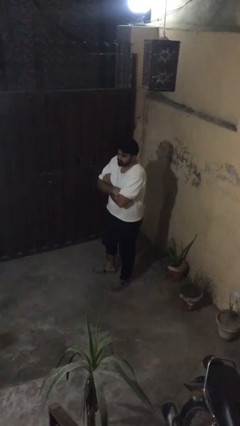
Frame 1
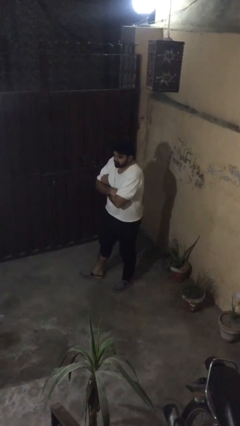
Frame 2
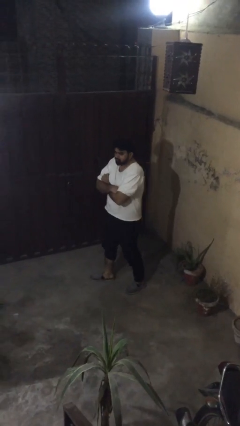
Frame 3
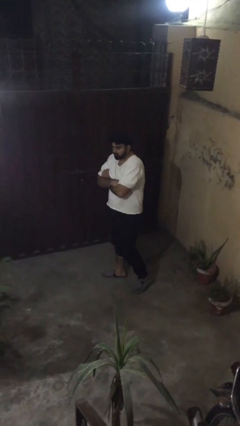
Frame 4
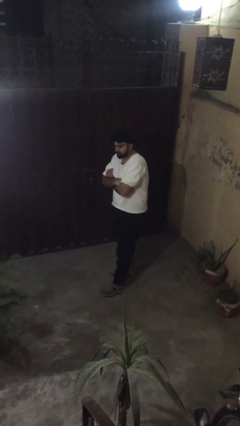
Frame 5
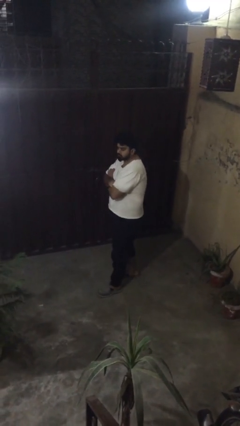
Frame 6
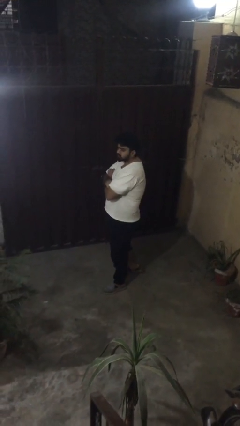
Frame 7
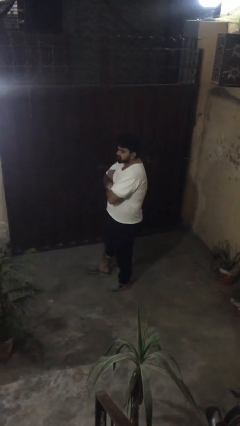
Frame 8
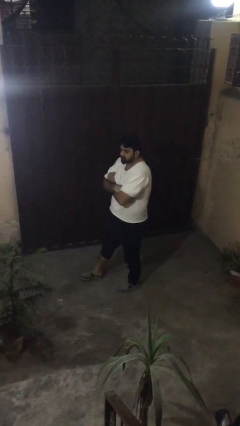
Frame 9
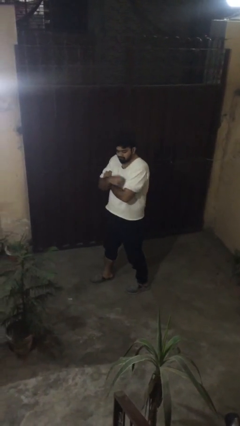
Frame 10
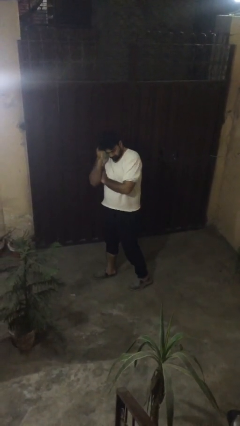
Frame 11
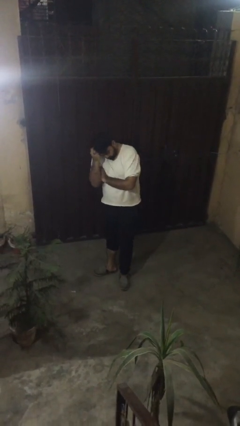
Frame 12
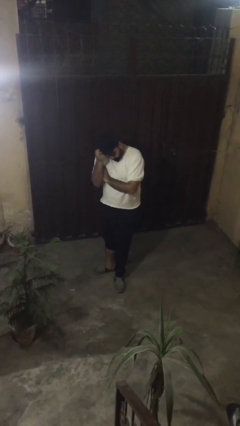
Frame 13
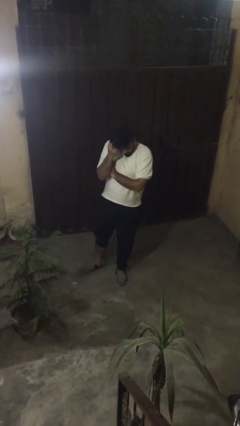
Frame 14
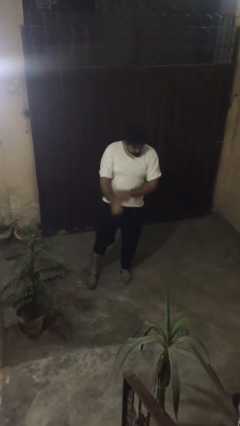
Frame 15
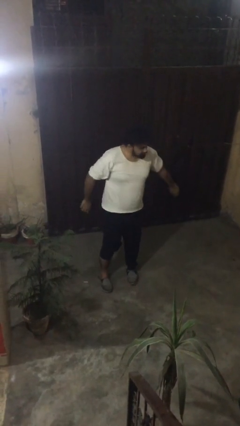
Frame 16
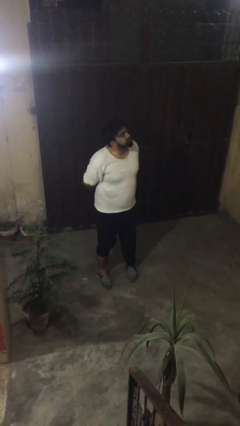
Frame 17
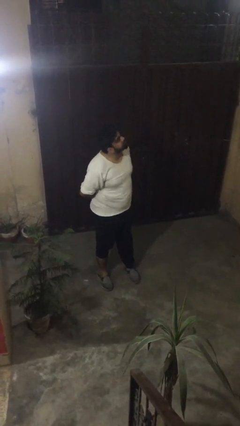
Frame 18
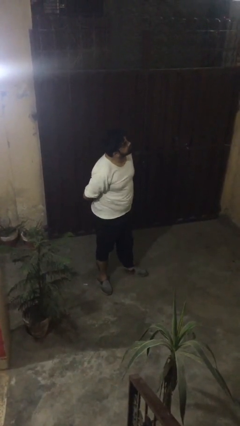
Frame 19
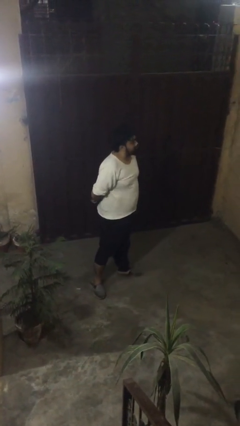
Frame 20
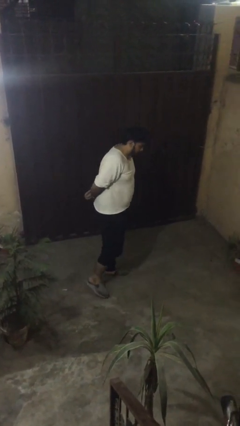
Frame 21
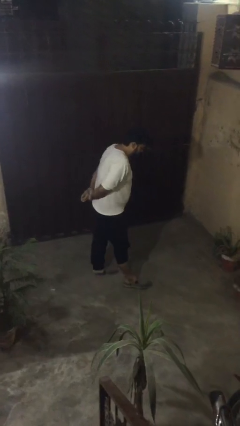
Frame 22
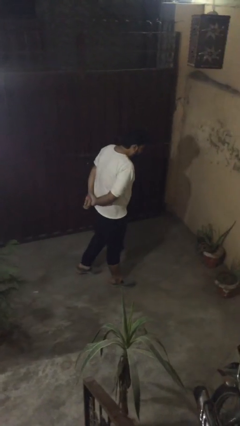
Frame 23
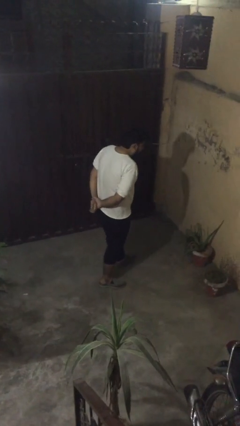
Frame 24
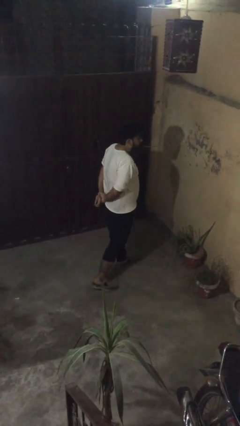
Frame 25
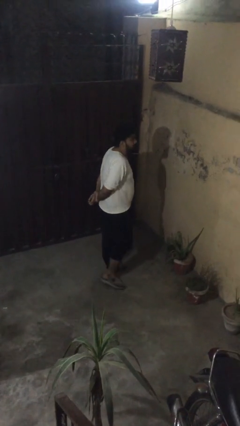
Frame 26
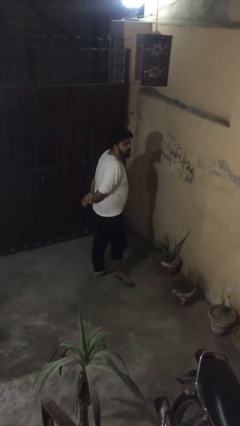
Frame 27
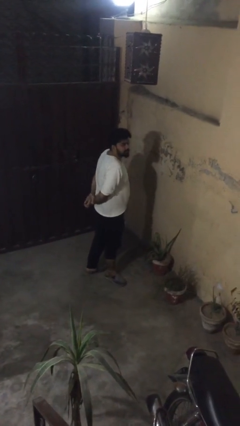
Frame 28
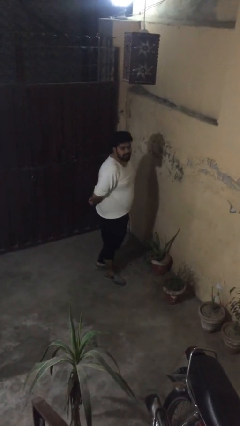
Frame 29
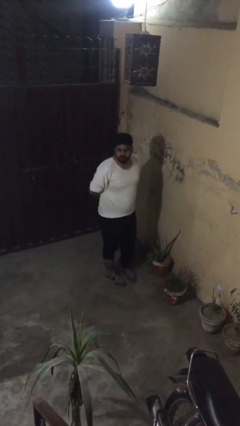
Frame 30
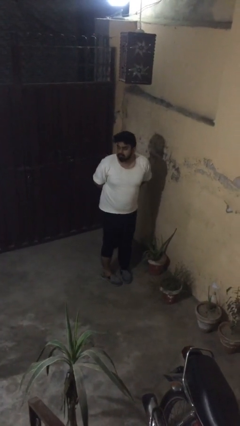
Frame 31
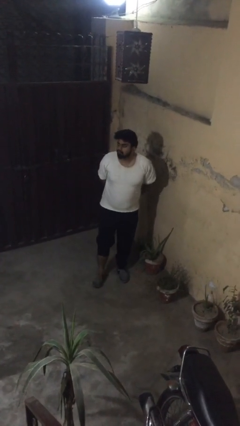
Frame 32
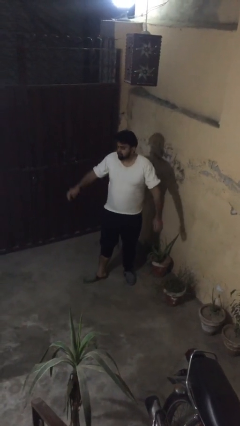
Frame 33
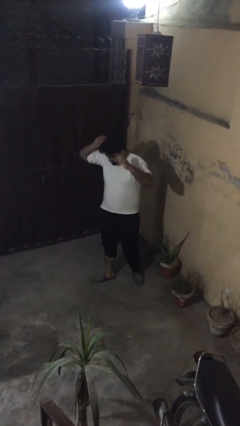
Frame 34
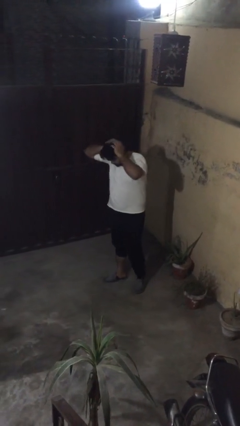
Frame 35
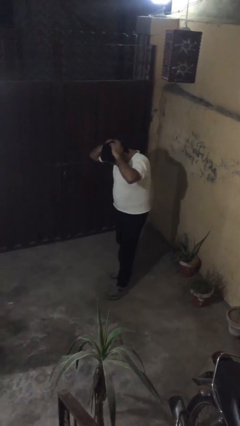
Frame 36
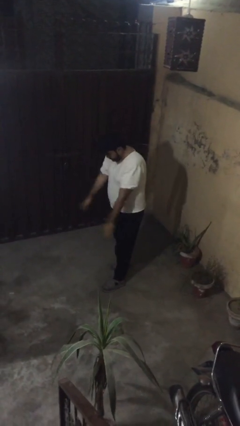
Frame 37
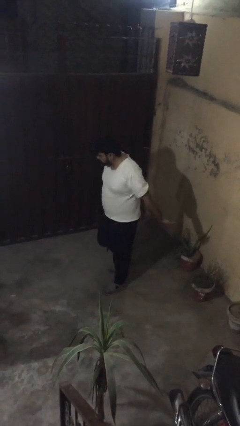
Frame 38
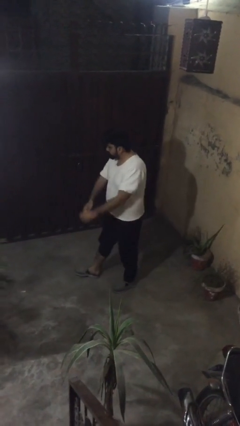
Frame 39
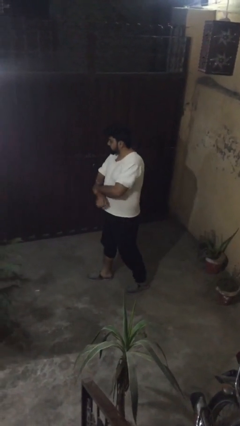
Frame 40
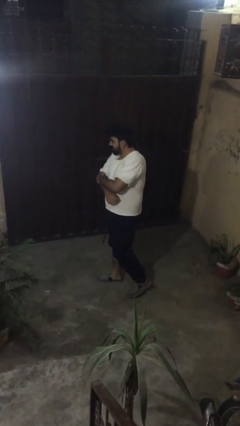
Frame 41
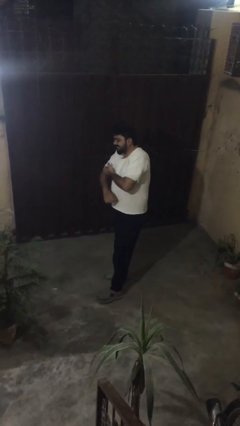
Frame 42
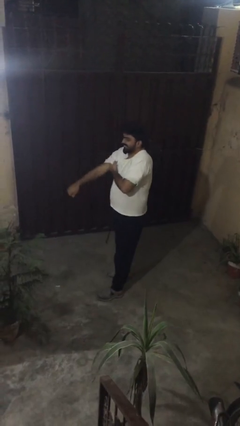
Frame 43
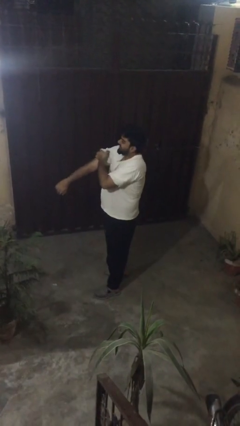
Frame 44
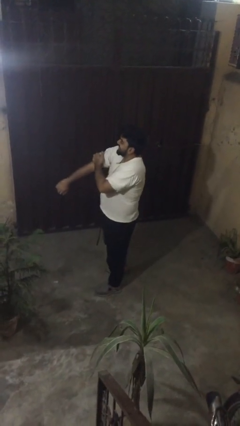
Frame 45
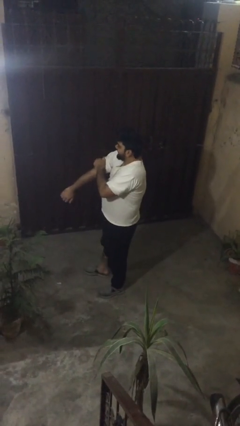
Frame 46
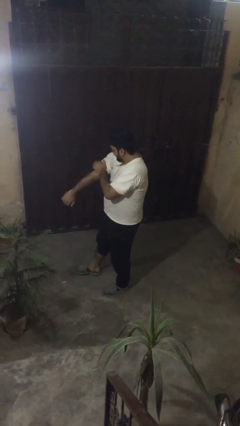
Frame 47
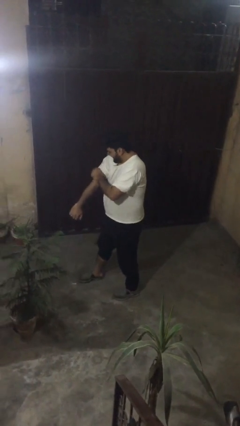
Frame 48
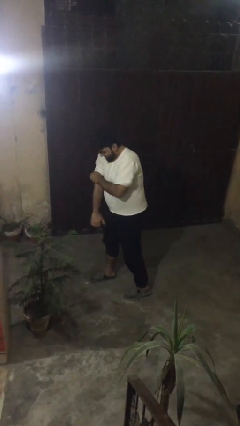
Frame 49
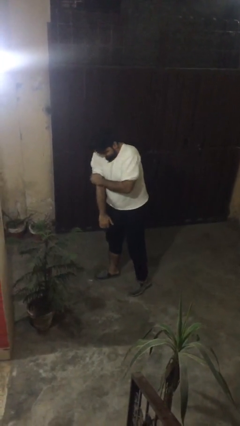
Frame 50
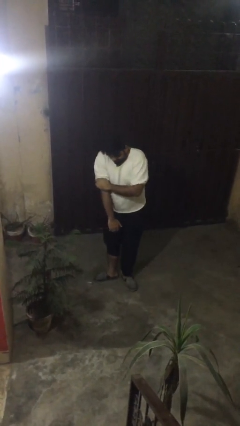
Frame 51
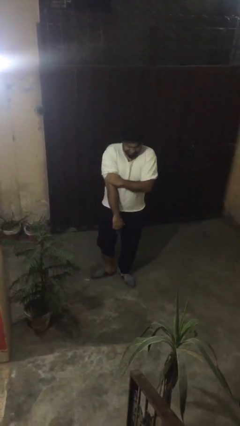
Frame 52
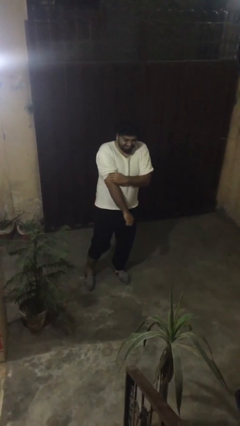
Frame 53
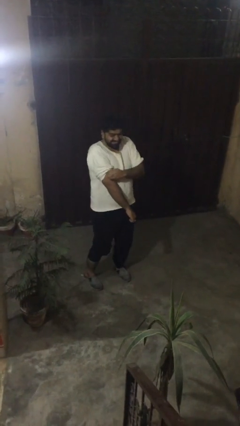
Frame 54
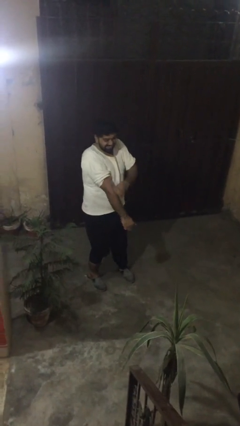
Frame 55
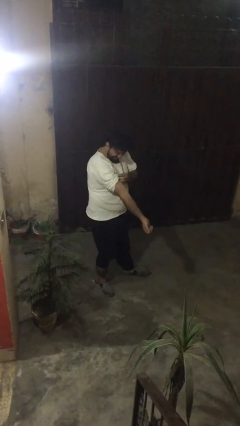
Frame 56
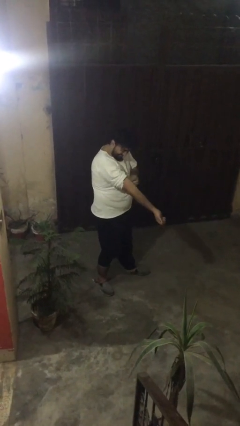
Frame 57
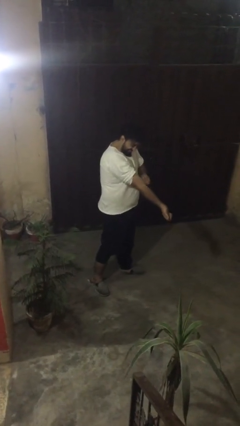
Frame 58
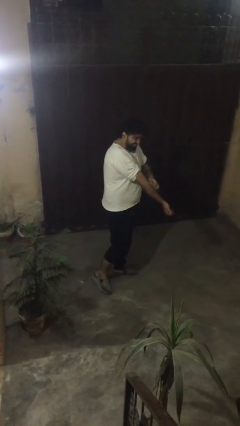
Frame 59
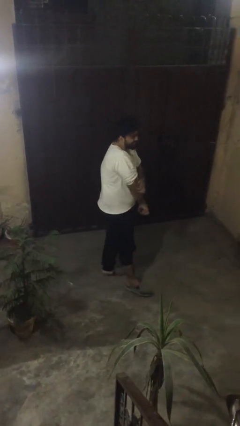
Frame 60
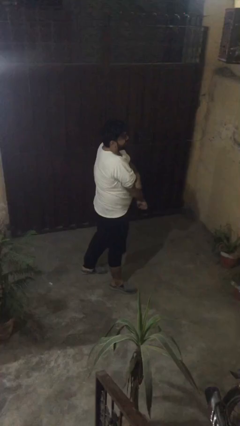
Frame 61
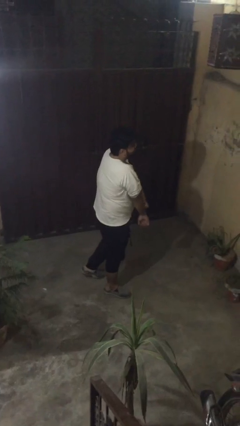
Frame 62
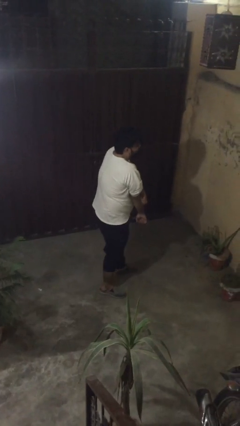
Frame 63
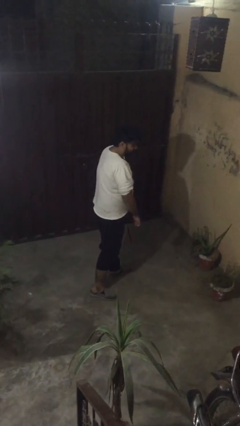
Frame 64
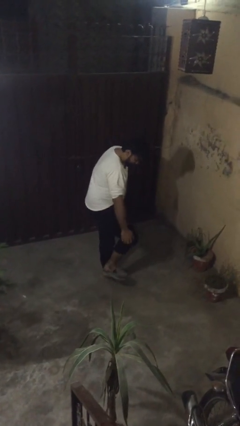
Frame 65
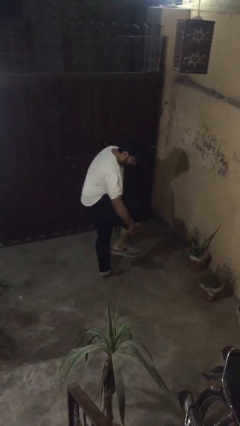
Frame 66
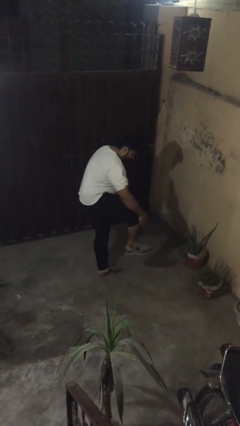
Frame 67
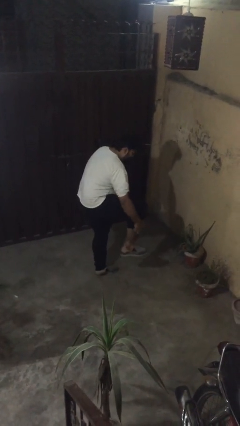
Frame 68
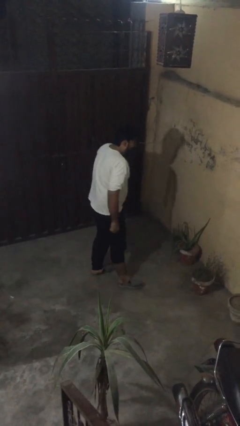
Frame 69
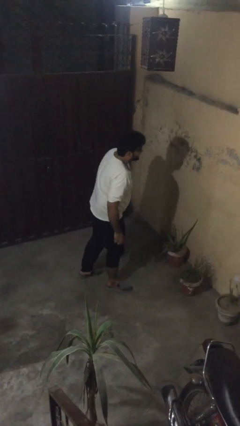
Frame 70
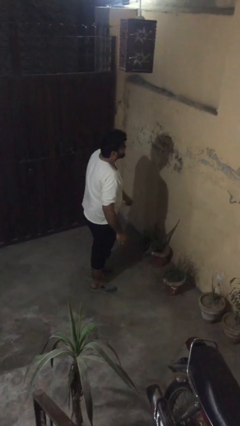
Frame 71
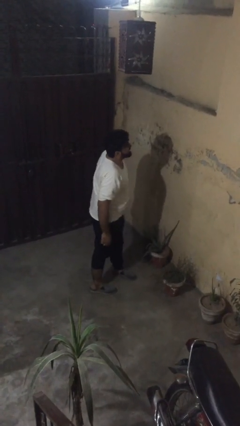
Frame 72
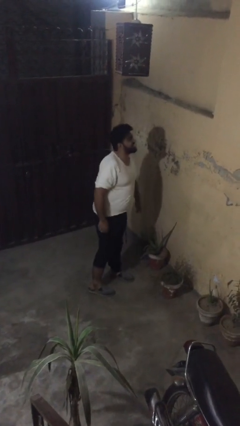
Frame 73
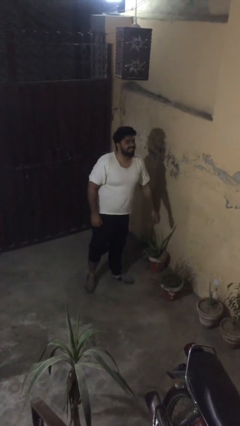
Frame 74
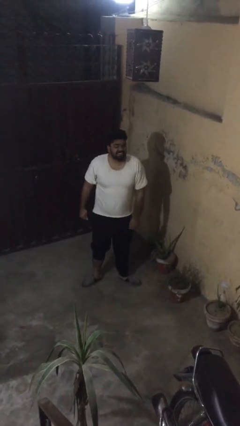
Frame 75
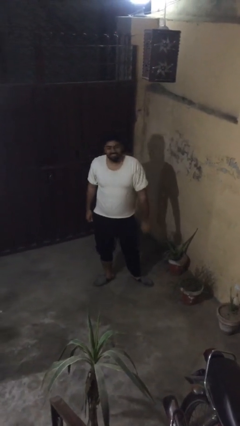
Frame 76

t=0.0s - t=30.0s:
person walks

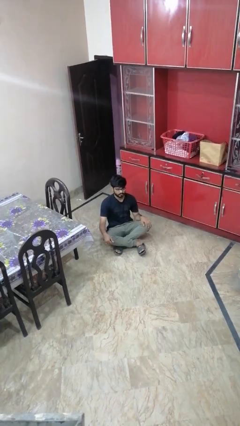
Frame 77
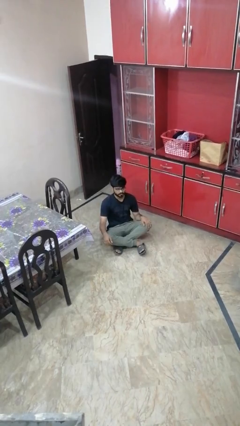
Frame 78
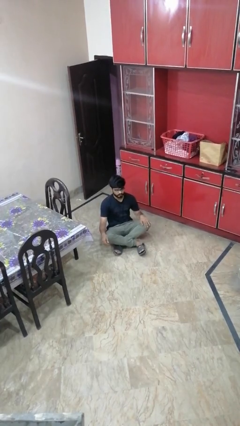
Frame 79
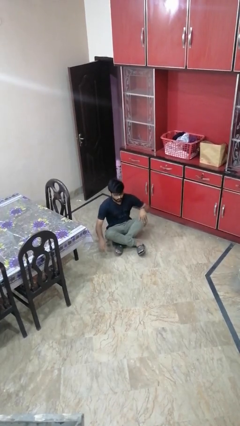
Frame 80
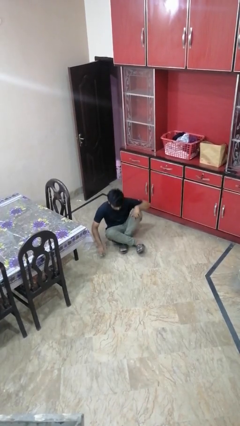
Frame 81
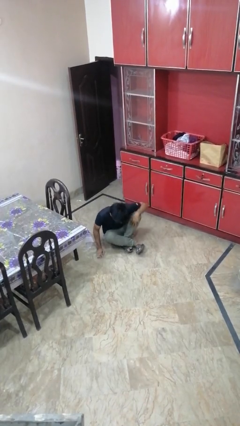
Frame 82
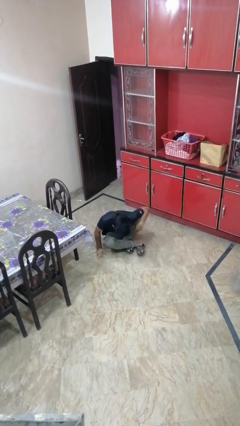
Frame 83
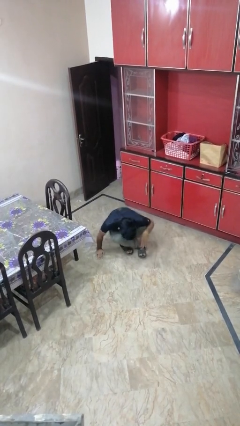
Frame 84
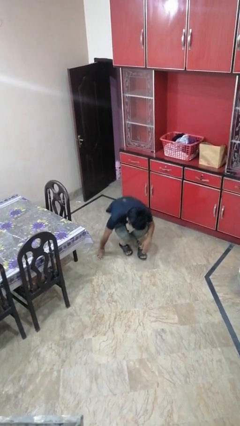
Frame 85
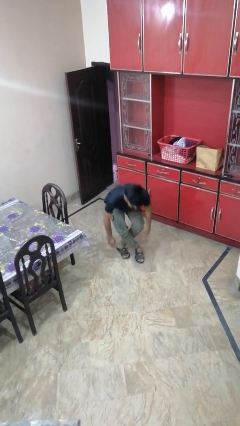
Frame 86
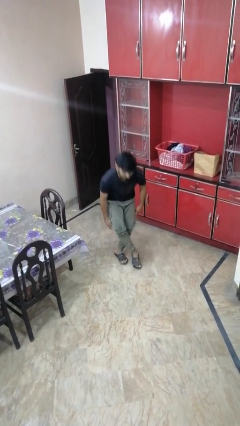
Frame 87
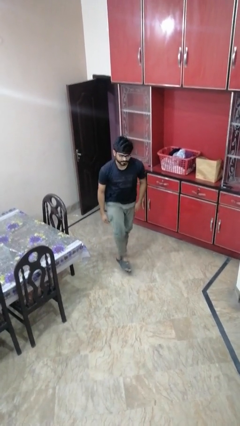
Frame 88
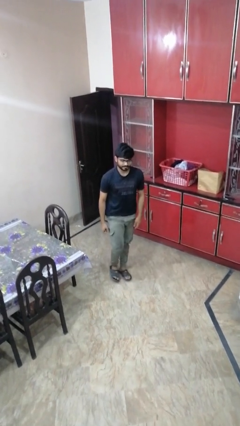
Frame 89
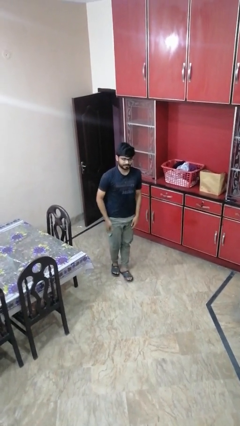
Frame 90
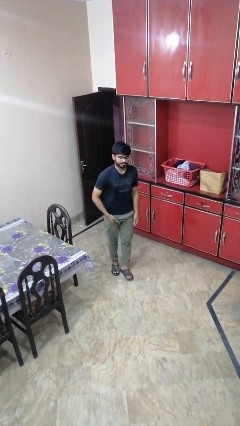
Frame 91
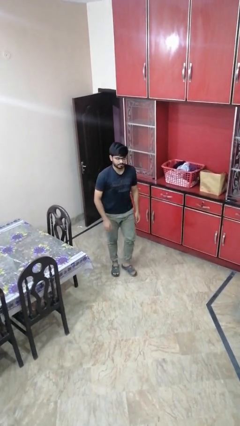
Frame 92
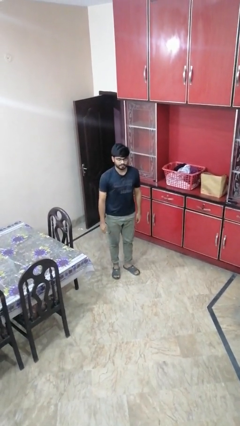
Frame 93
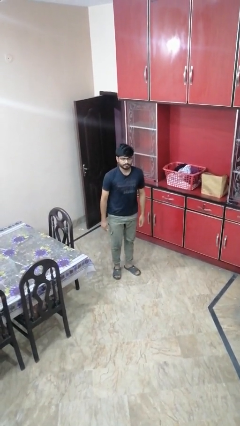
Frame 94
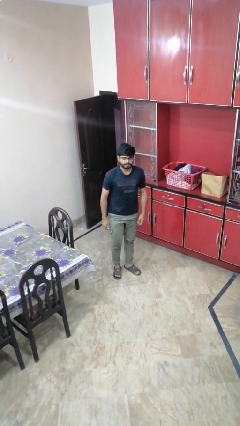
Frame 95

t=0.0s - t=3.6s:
person stands up from floor
